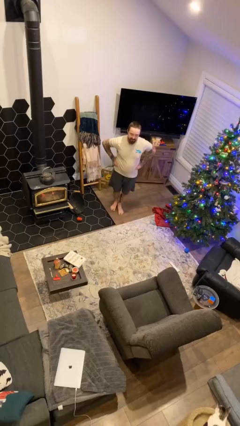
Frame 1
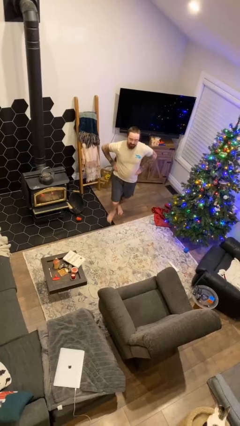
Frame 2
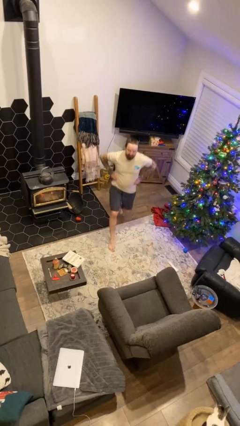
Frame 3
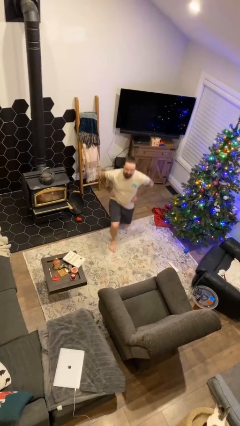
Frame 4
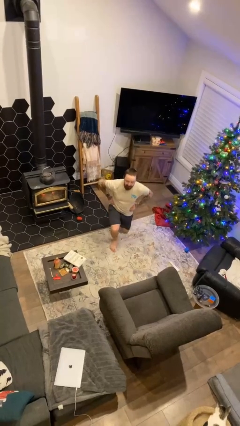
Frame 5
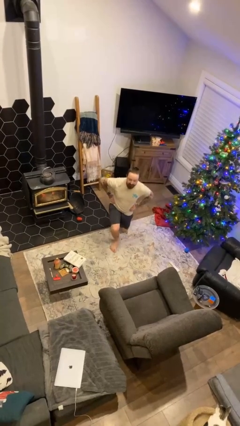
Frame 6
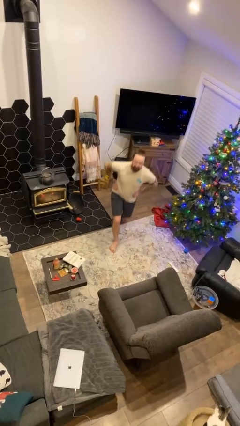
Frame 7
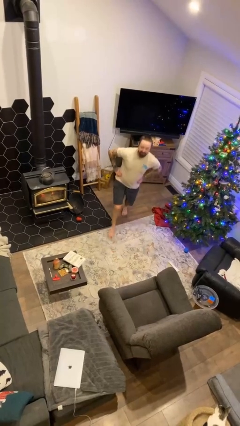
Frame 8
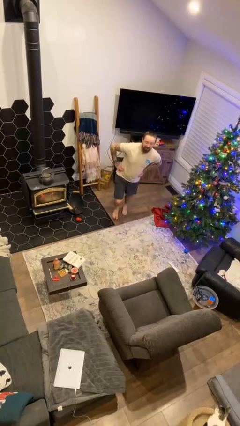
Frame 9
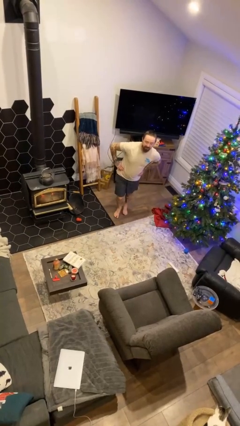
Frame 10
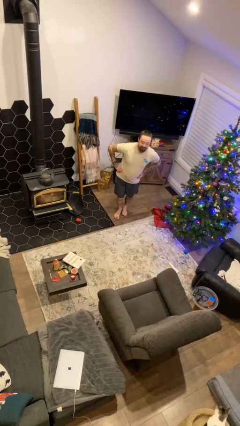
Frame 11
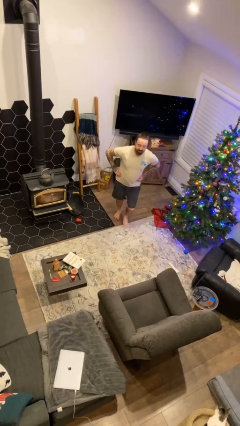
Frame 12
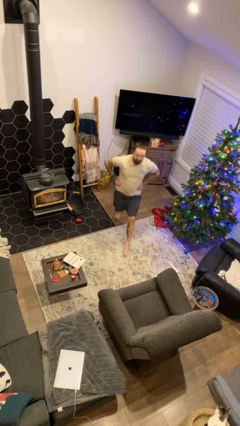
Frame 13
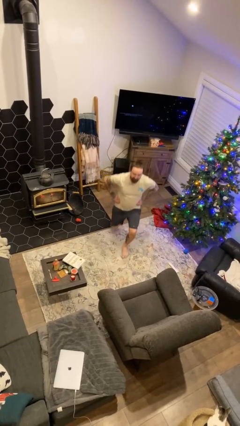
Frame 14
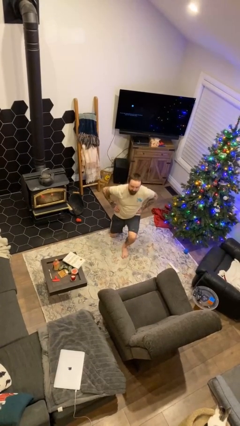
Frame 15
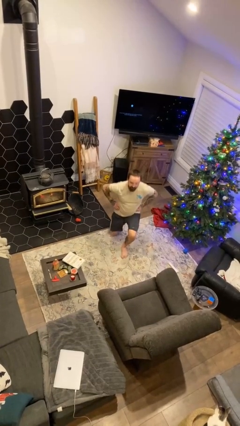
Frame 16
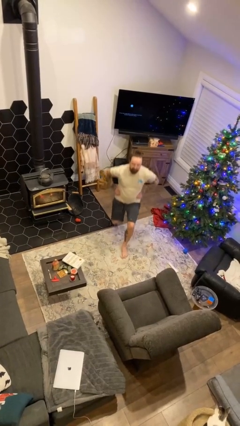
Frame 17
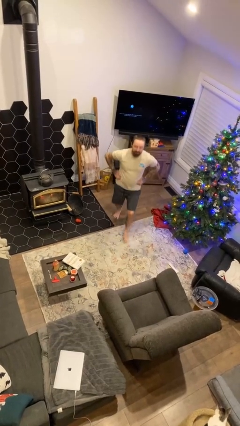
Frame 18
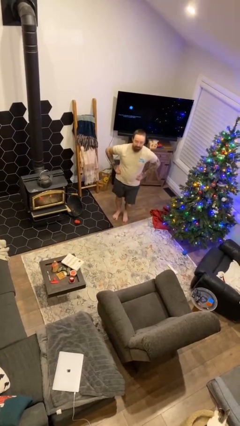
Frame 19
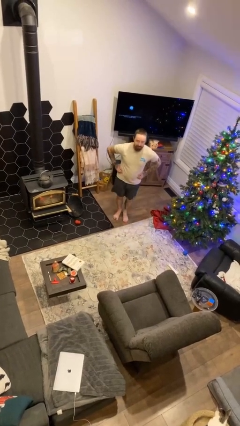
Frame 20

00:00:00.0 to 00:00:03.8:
person exercises with lunges

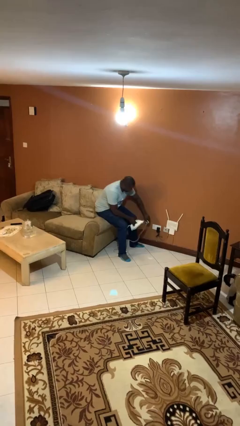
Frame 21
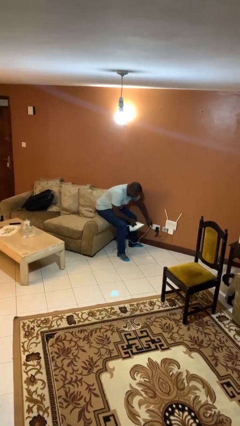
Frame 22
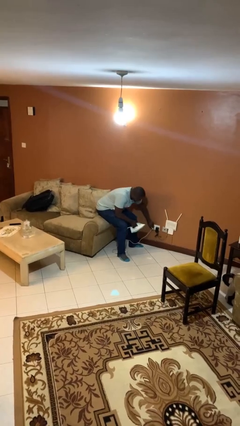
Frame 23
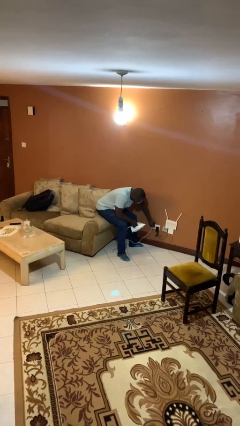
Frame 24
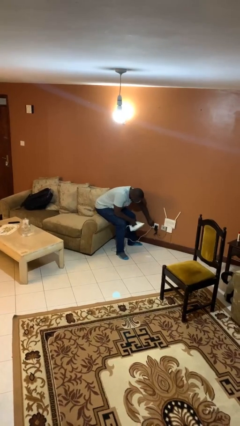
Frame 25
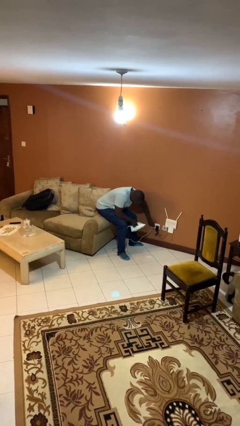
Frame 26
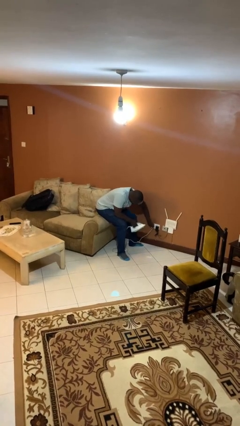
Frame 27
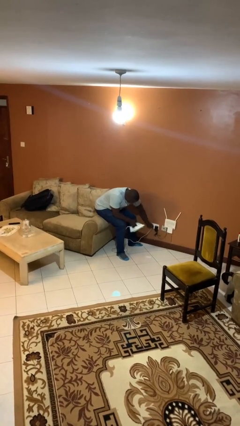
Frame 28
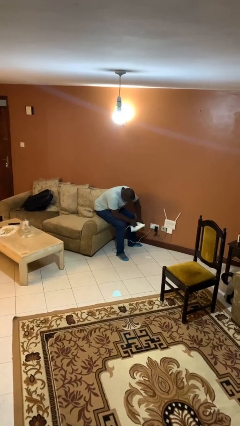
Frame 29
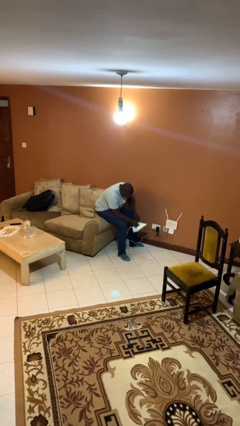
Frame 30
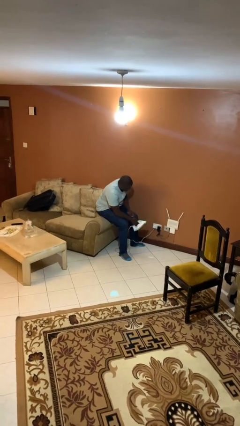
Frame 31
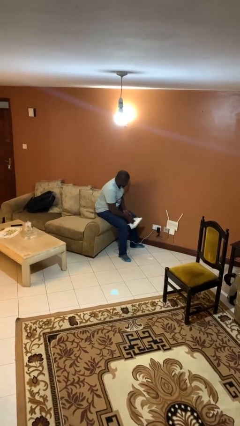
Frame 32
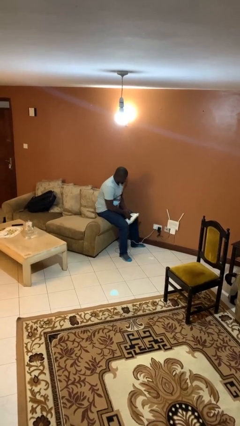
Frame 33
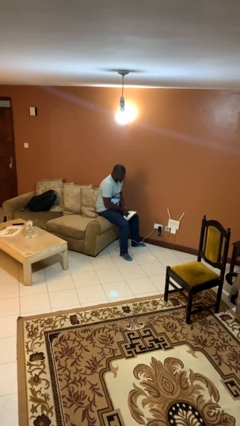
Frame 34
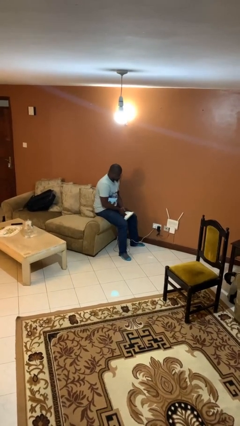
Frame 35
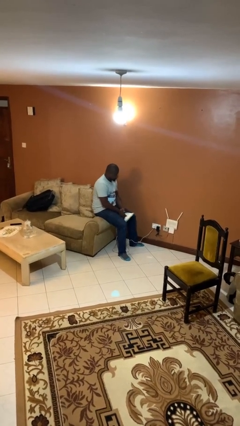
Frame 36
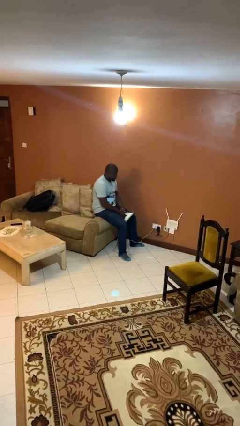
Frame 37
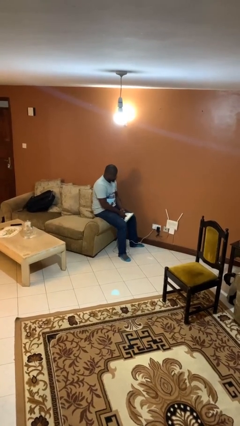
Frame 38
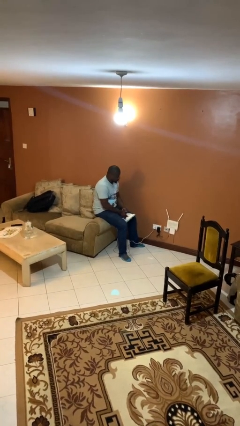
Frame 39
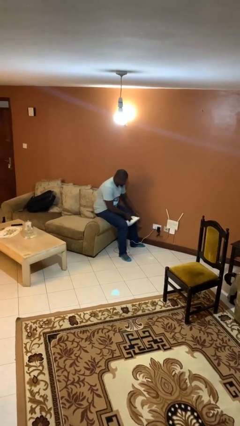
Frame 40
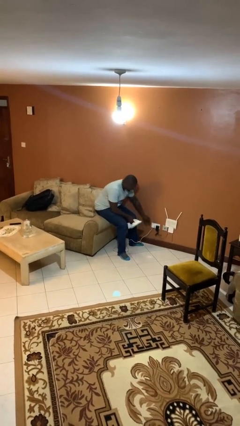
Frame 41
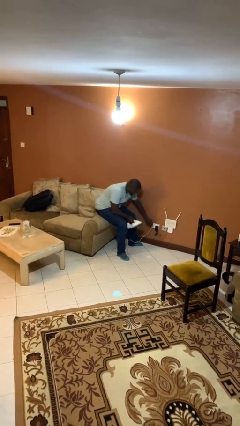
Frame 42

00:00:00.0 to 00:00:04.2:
person plugs into electrical socket

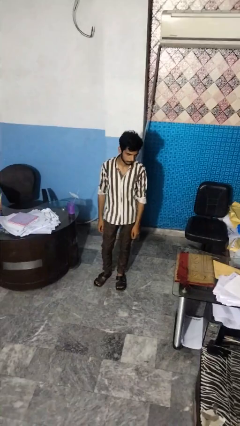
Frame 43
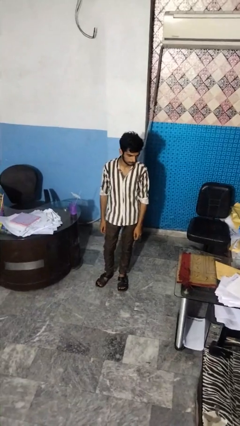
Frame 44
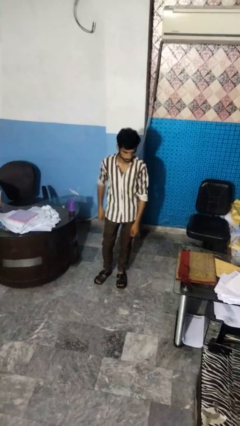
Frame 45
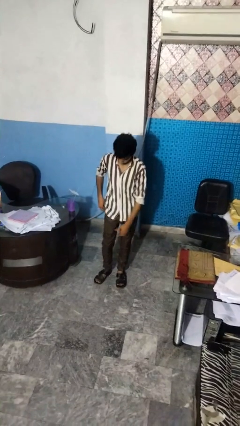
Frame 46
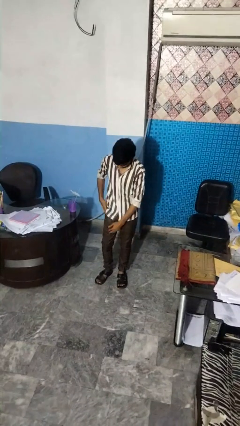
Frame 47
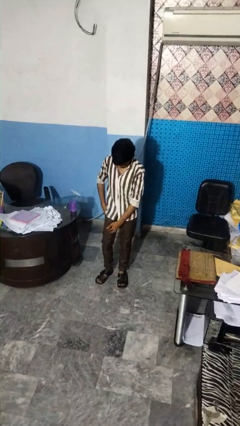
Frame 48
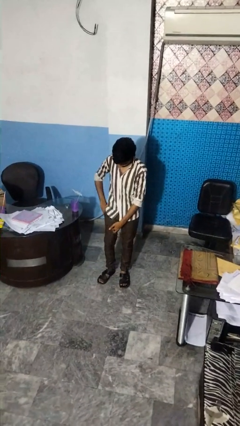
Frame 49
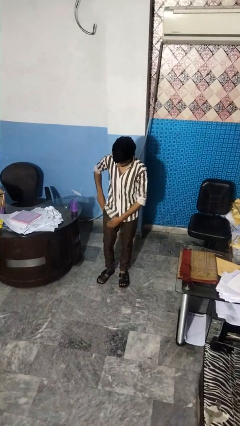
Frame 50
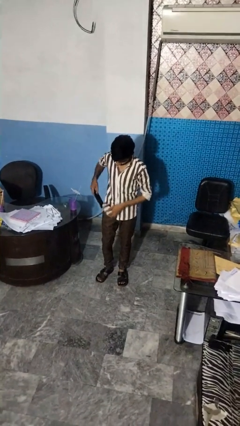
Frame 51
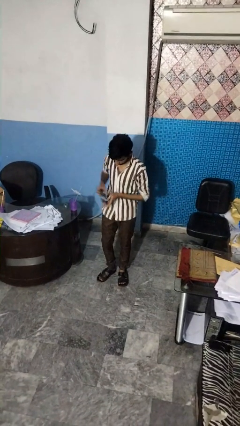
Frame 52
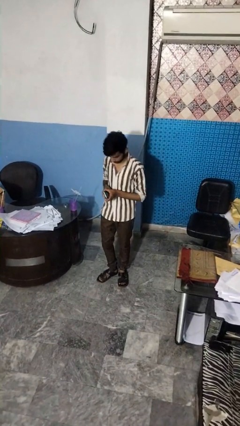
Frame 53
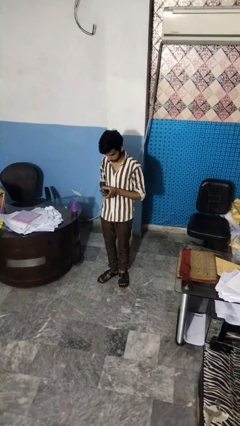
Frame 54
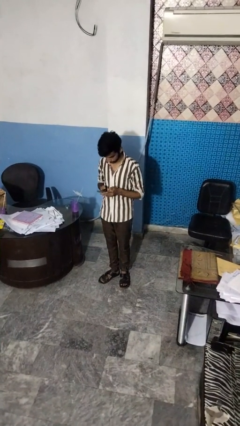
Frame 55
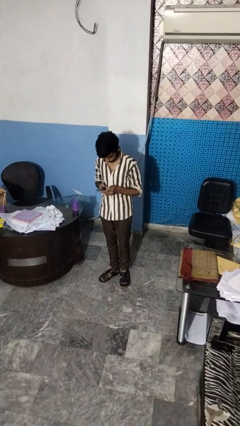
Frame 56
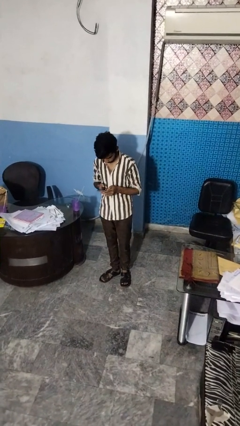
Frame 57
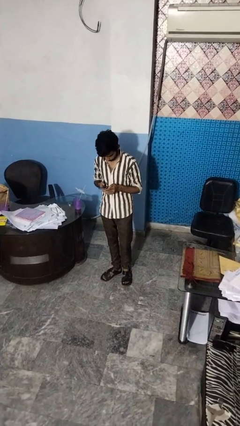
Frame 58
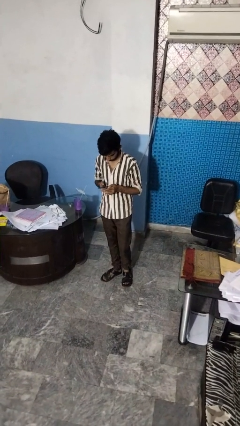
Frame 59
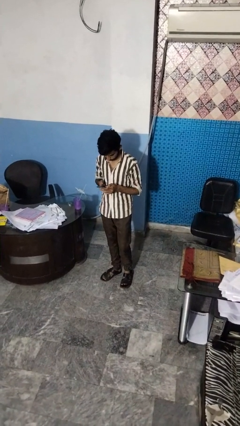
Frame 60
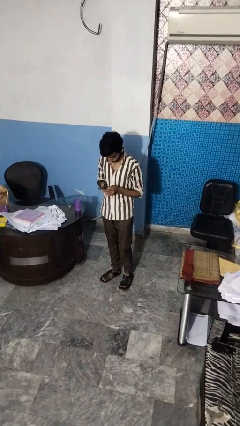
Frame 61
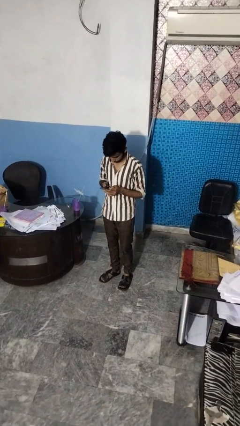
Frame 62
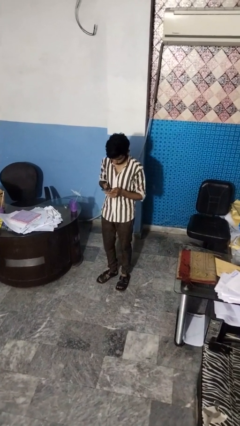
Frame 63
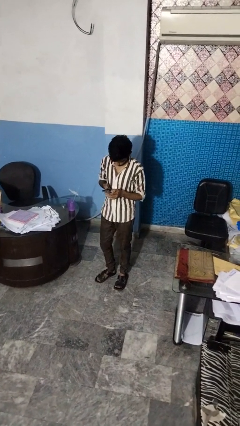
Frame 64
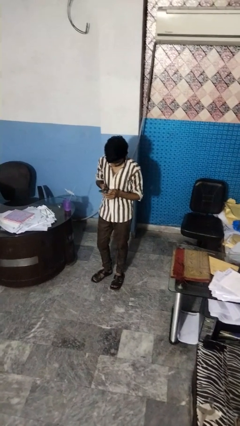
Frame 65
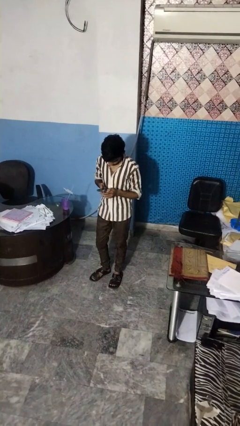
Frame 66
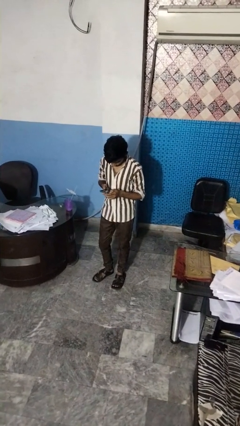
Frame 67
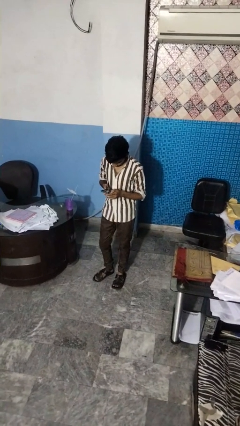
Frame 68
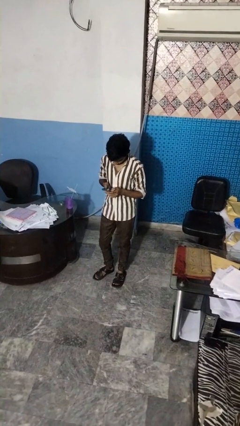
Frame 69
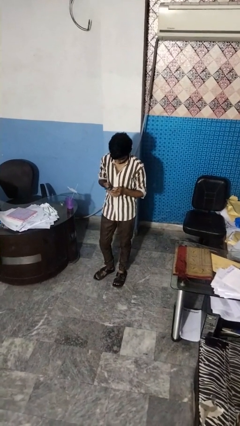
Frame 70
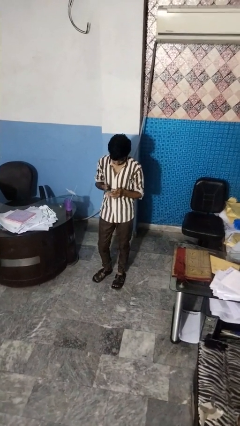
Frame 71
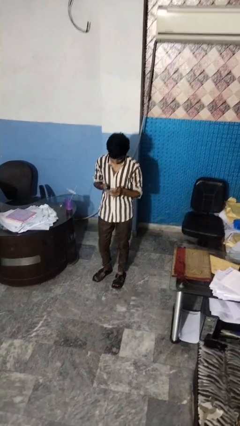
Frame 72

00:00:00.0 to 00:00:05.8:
person takes phone from pocket

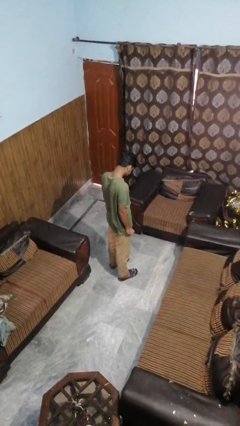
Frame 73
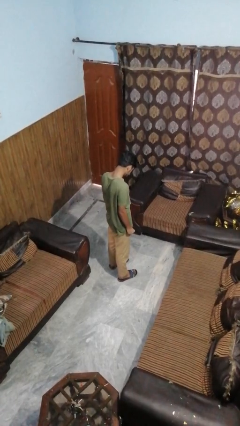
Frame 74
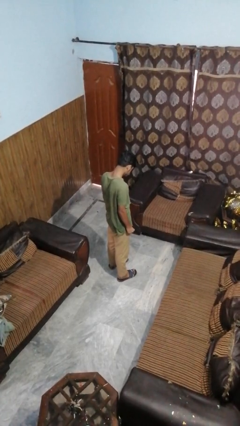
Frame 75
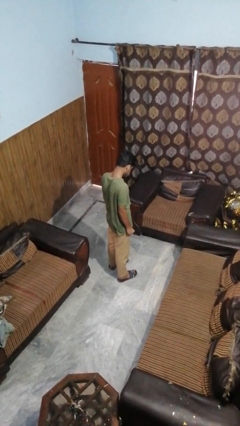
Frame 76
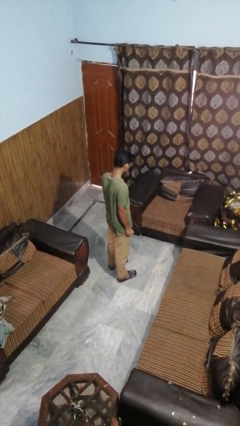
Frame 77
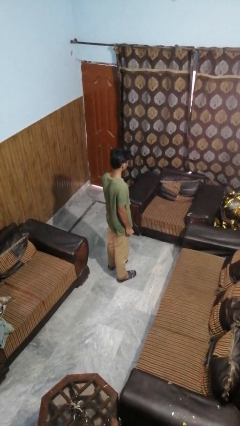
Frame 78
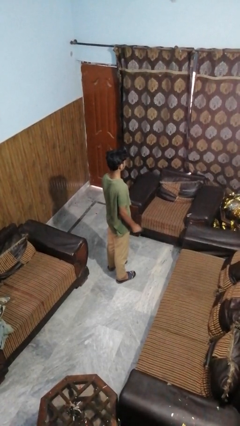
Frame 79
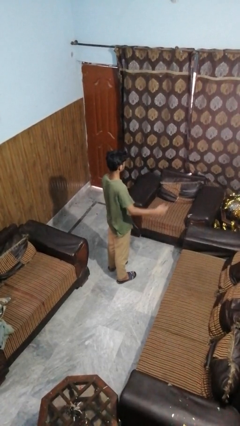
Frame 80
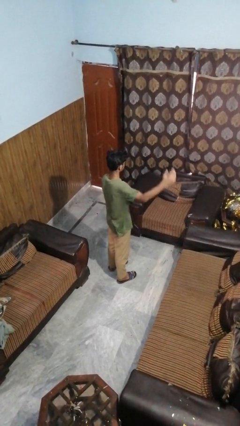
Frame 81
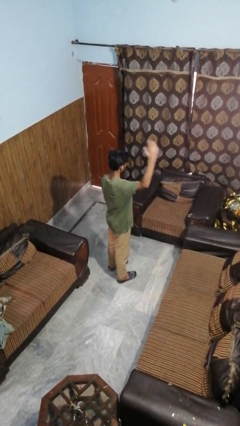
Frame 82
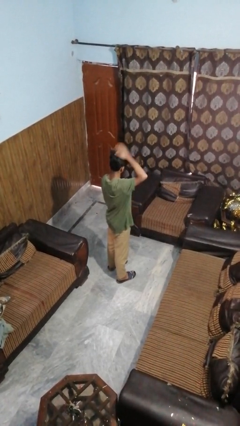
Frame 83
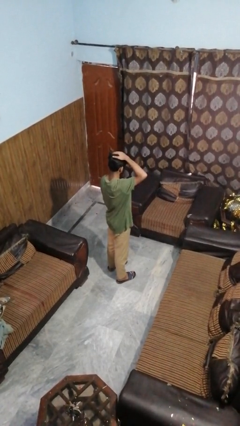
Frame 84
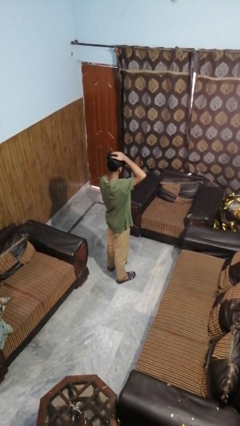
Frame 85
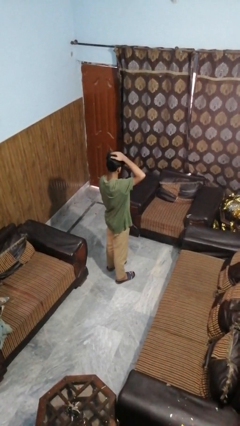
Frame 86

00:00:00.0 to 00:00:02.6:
person pats head

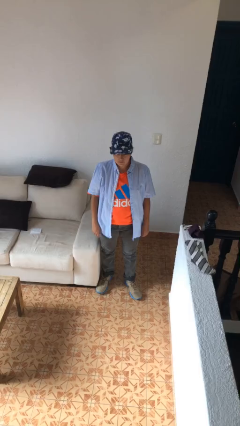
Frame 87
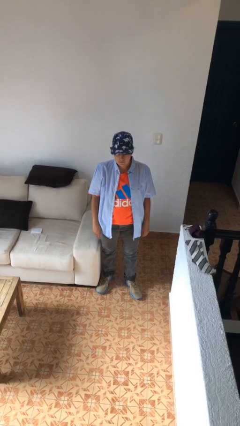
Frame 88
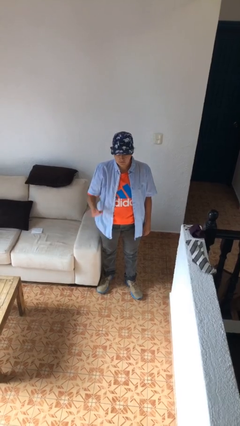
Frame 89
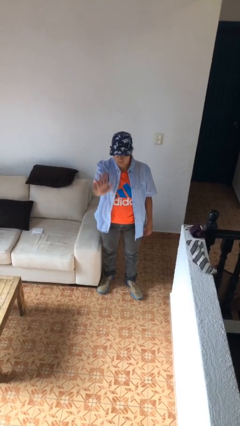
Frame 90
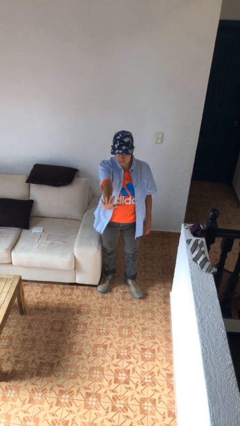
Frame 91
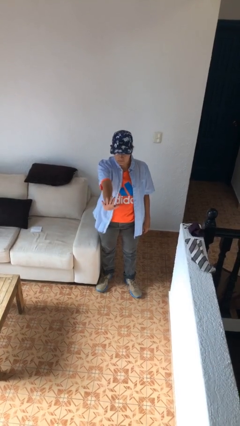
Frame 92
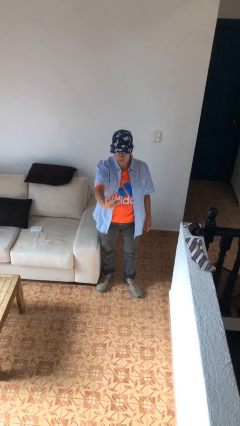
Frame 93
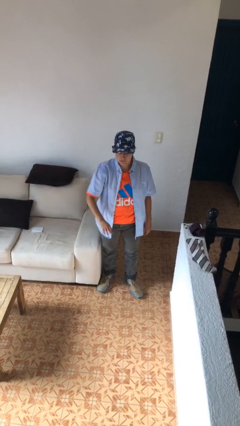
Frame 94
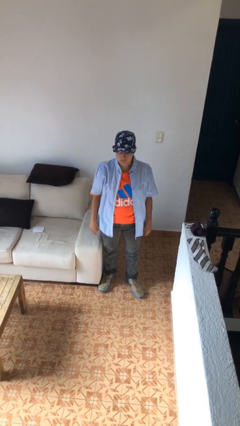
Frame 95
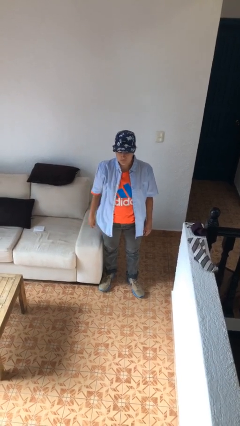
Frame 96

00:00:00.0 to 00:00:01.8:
person gestures stop
